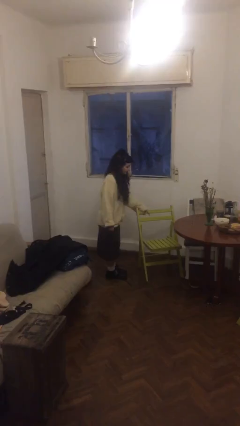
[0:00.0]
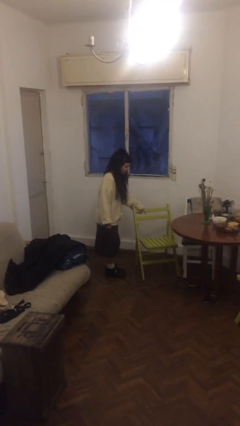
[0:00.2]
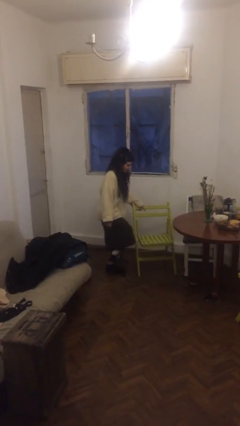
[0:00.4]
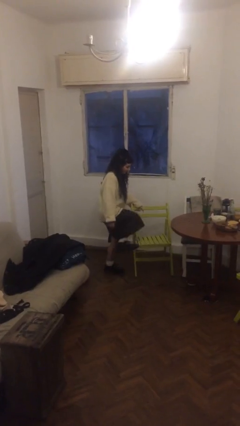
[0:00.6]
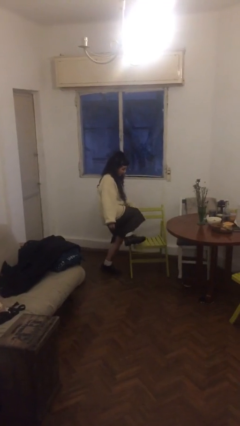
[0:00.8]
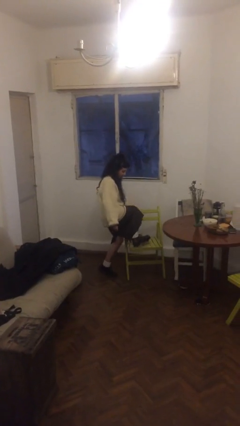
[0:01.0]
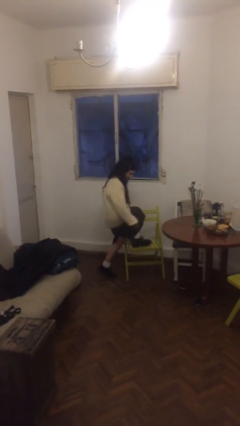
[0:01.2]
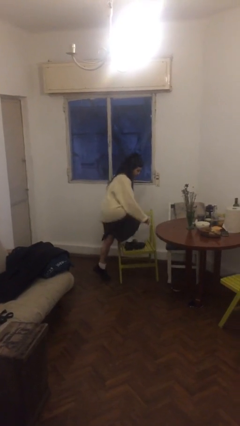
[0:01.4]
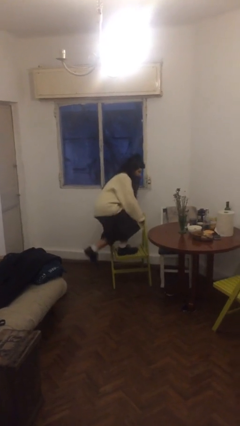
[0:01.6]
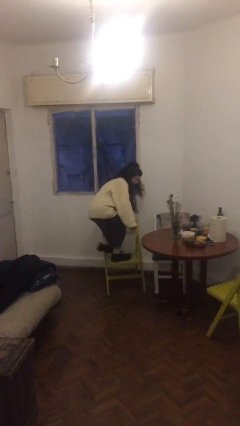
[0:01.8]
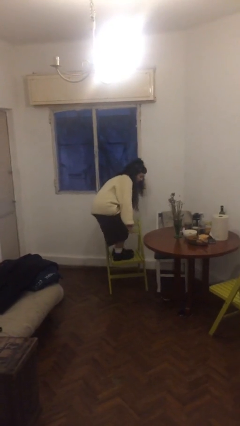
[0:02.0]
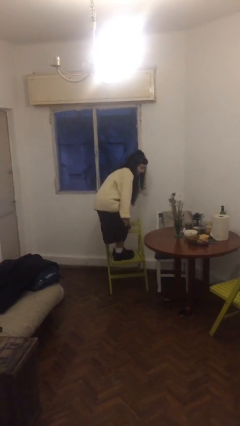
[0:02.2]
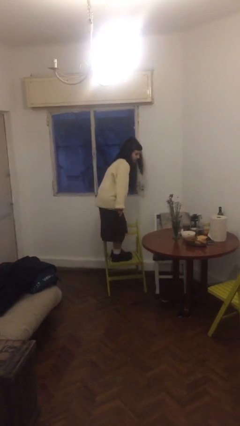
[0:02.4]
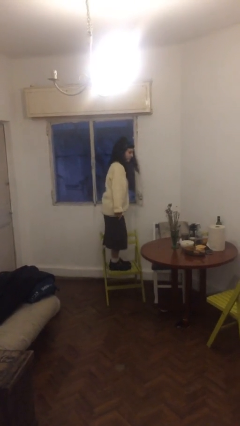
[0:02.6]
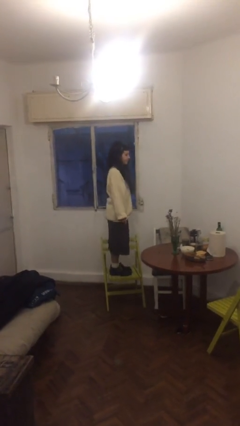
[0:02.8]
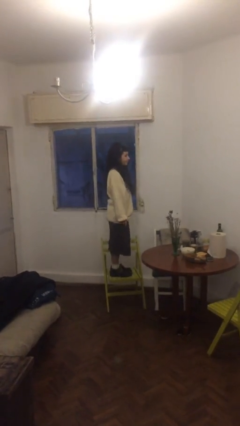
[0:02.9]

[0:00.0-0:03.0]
person climbs on chair

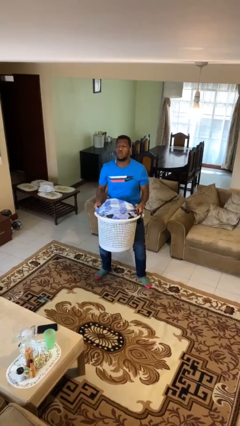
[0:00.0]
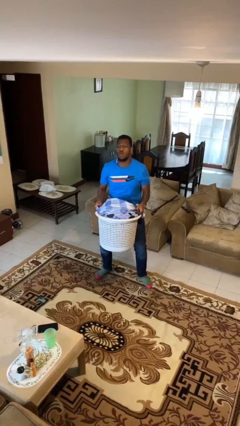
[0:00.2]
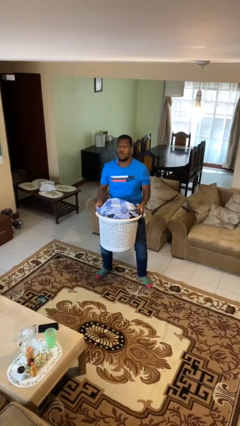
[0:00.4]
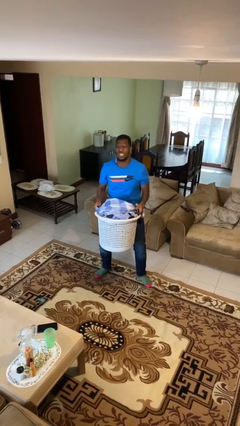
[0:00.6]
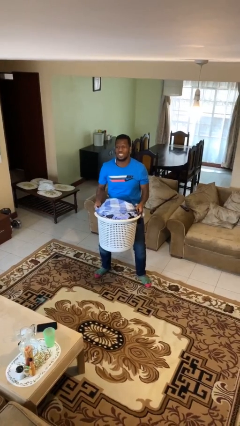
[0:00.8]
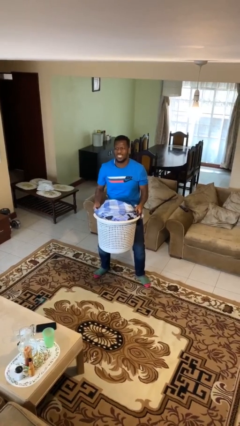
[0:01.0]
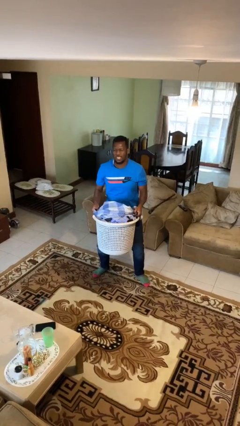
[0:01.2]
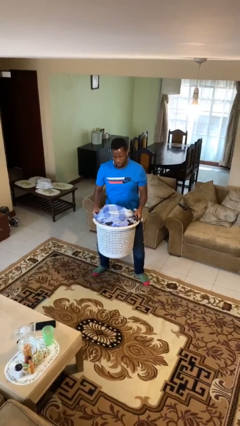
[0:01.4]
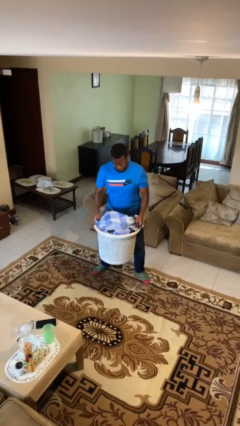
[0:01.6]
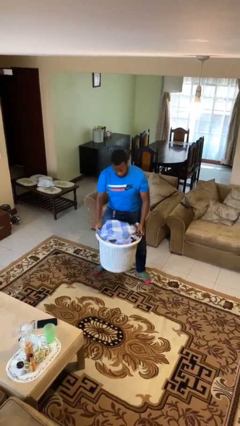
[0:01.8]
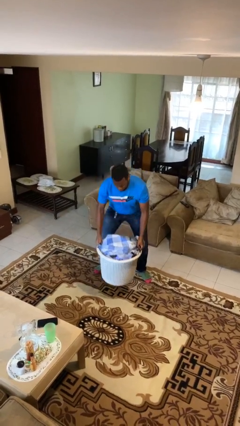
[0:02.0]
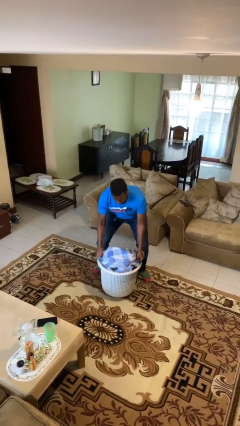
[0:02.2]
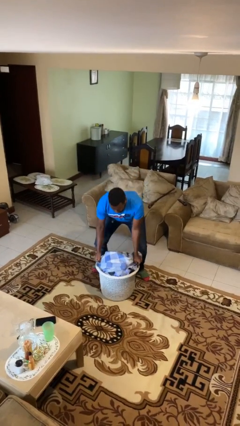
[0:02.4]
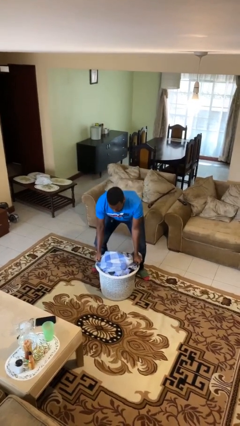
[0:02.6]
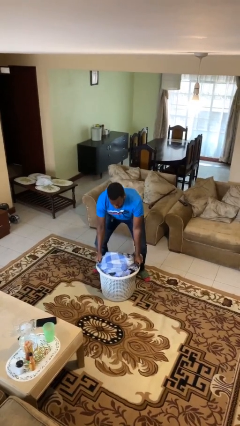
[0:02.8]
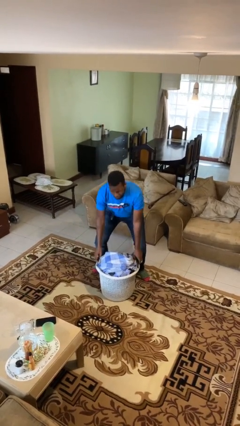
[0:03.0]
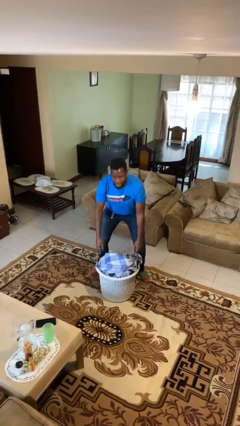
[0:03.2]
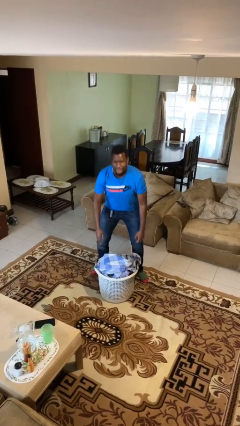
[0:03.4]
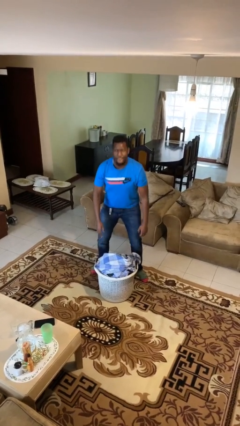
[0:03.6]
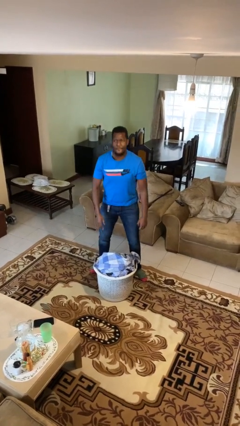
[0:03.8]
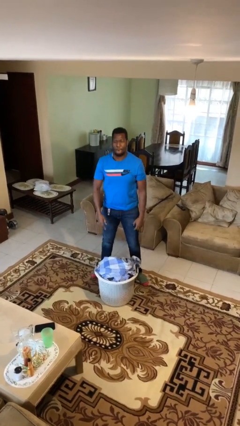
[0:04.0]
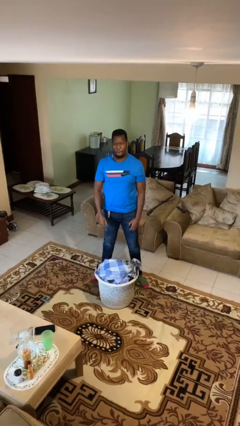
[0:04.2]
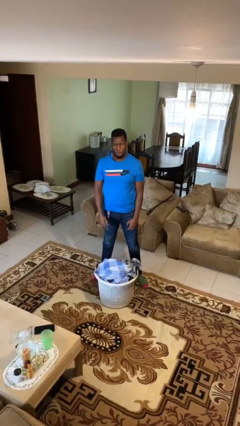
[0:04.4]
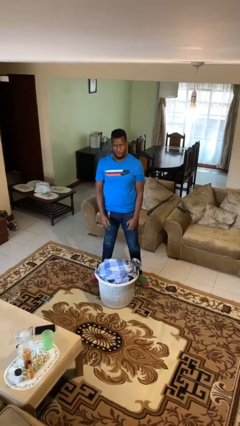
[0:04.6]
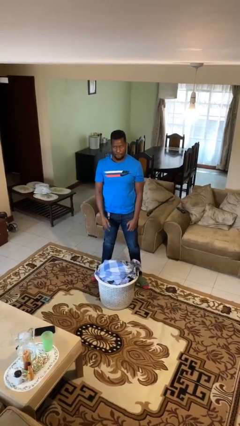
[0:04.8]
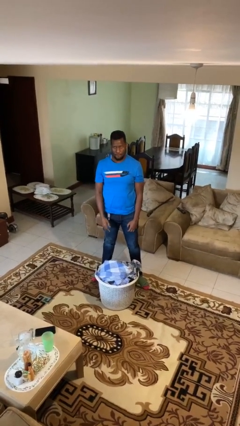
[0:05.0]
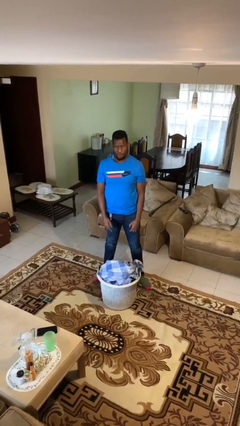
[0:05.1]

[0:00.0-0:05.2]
person puts down object on floor

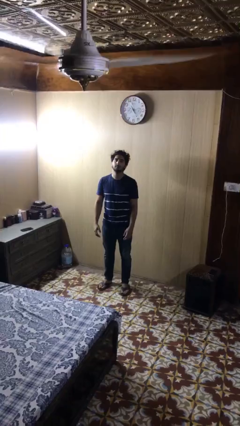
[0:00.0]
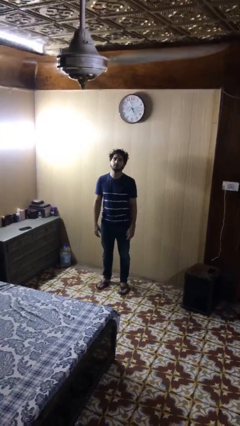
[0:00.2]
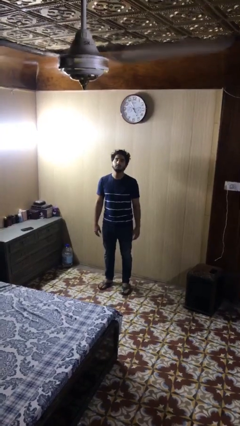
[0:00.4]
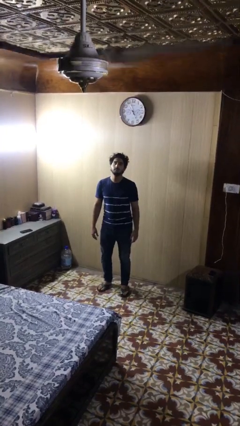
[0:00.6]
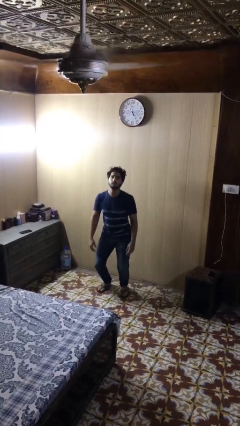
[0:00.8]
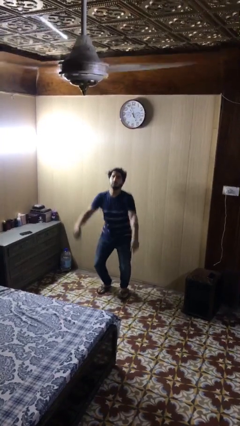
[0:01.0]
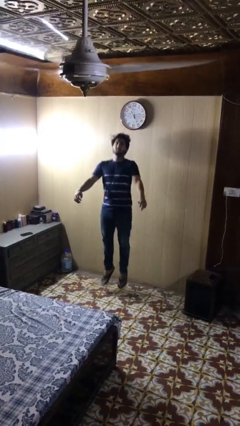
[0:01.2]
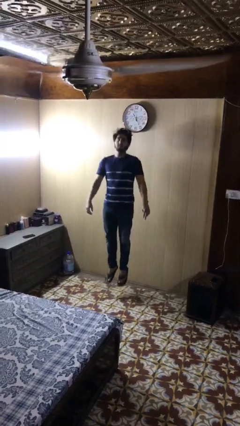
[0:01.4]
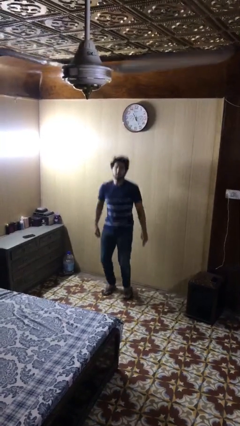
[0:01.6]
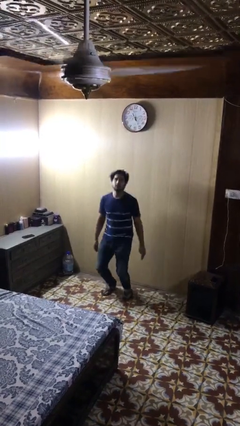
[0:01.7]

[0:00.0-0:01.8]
person jumps

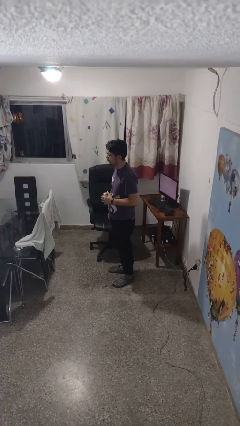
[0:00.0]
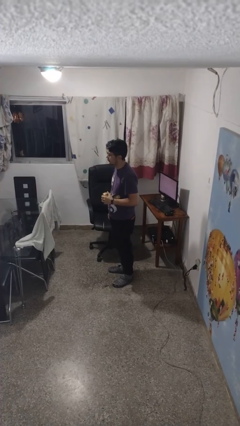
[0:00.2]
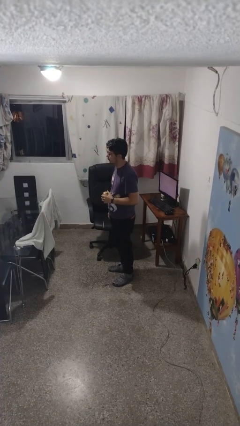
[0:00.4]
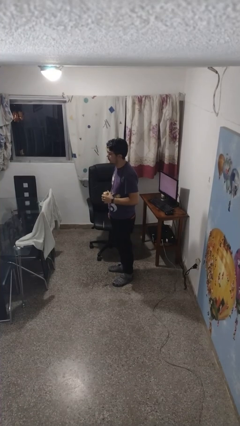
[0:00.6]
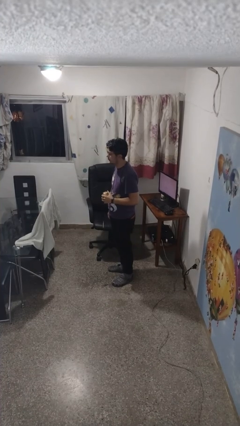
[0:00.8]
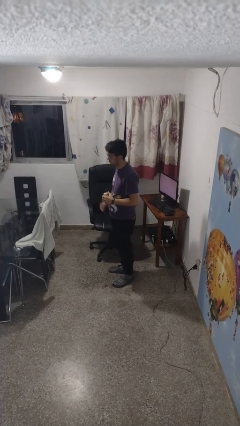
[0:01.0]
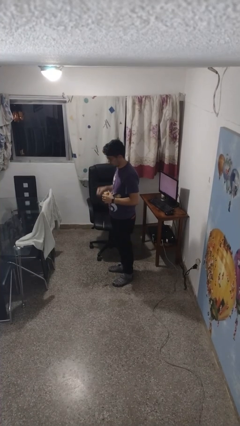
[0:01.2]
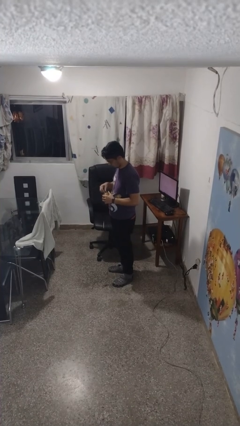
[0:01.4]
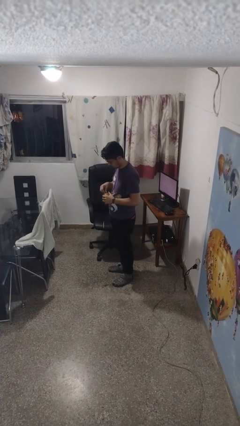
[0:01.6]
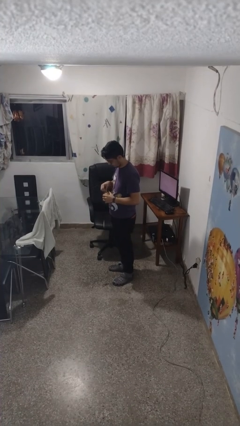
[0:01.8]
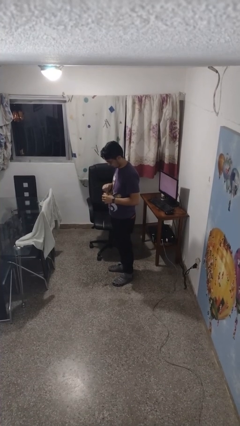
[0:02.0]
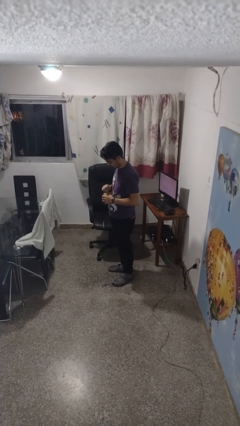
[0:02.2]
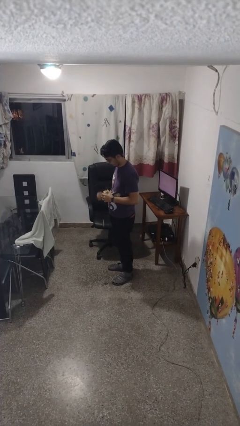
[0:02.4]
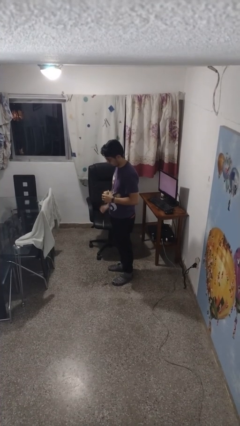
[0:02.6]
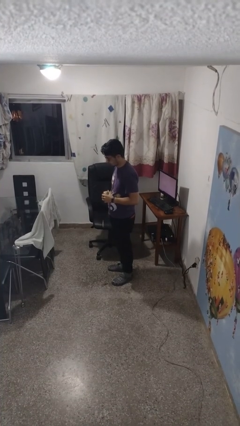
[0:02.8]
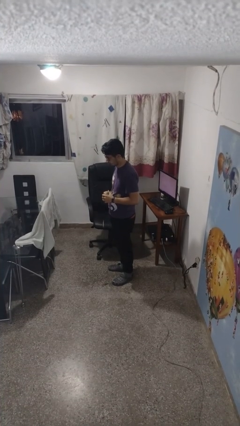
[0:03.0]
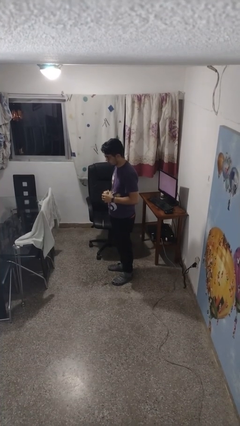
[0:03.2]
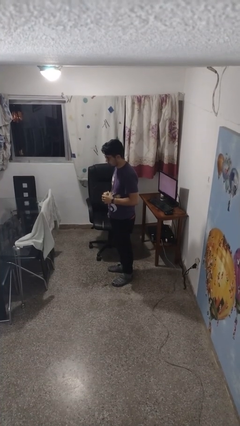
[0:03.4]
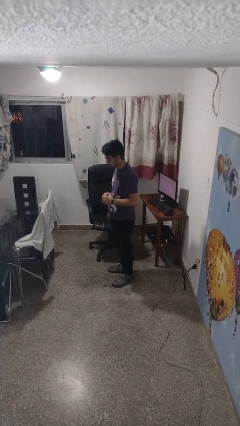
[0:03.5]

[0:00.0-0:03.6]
person opens beverage can

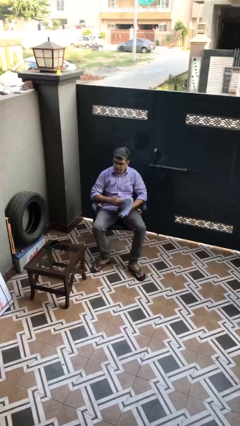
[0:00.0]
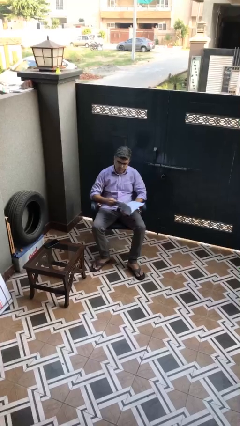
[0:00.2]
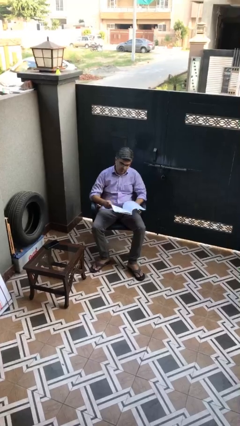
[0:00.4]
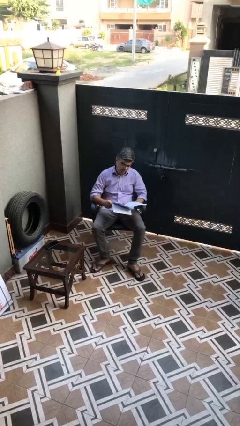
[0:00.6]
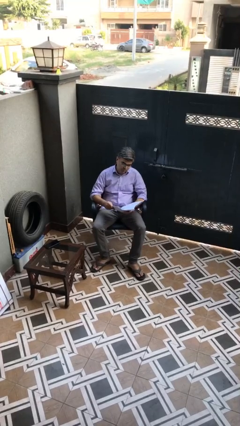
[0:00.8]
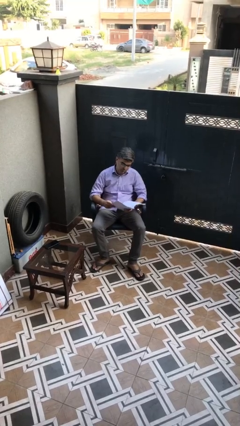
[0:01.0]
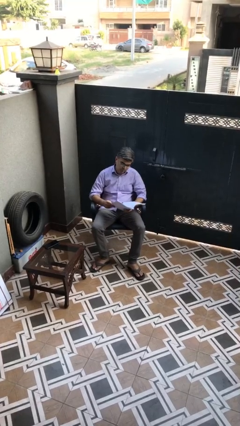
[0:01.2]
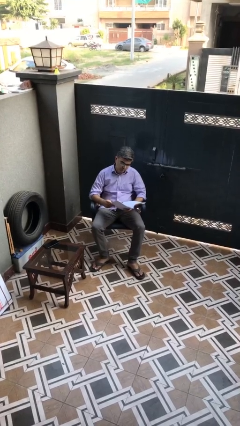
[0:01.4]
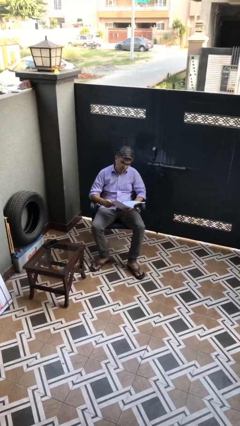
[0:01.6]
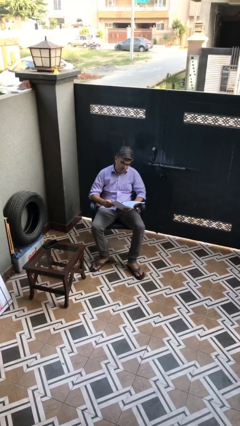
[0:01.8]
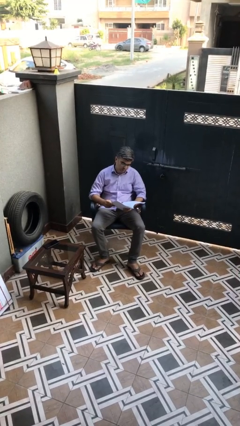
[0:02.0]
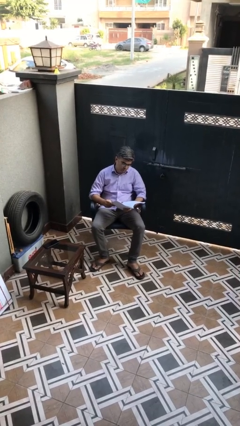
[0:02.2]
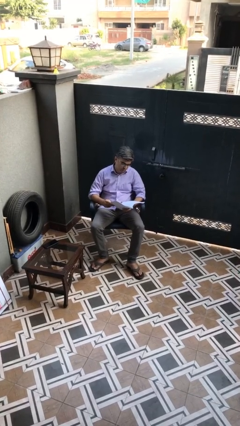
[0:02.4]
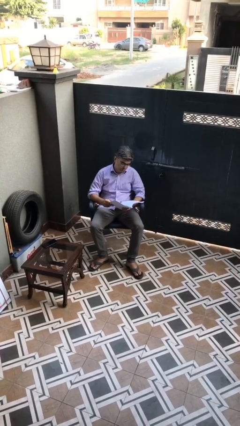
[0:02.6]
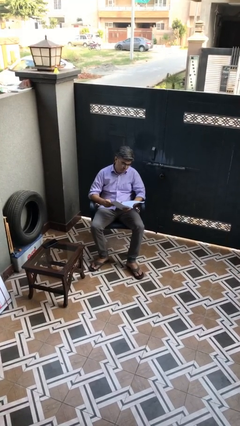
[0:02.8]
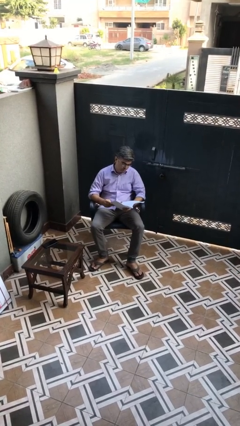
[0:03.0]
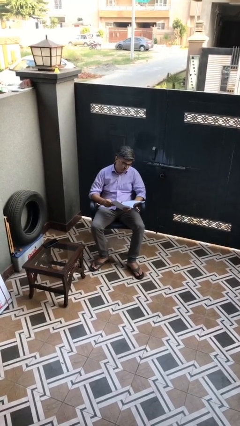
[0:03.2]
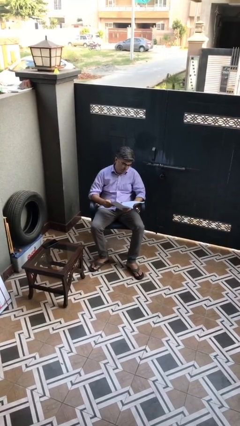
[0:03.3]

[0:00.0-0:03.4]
person reads document

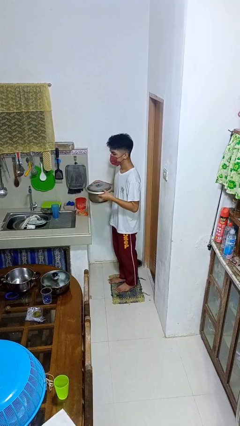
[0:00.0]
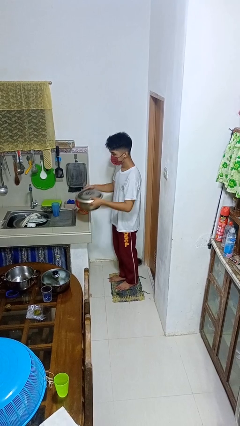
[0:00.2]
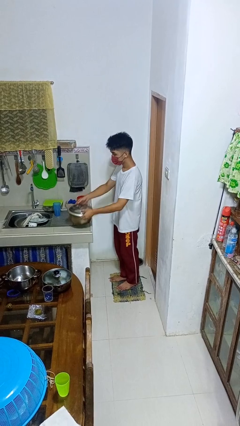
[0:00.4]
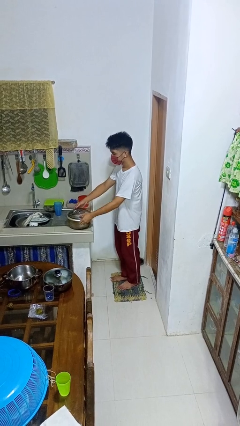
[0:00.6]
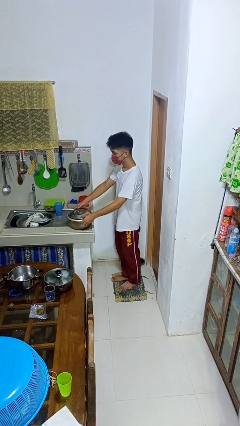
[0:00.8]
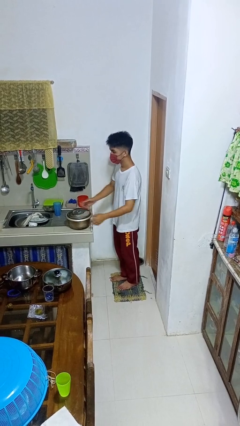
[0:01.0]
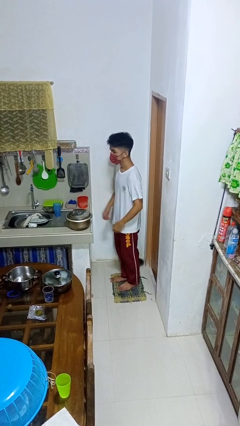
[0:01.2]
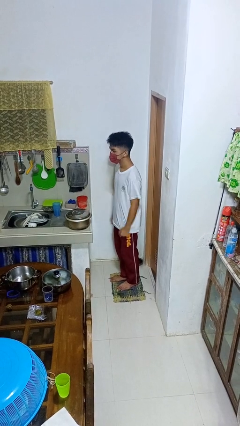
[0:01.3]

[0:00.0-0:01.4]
person puts down object on countertop
